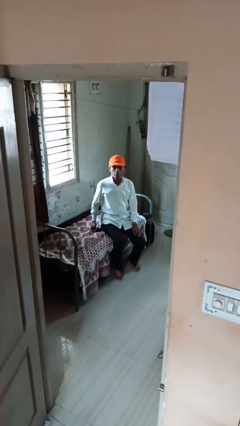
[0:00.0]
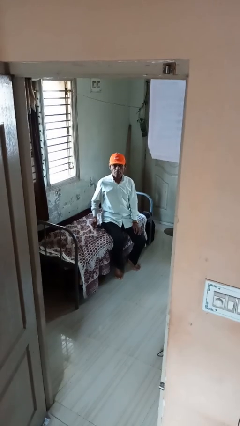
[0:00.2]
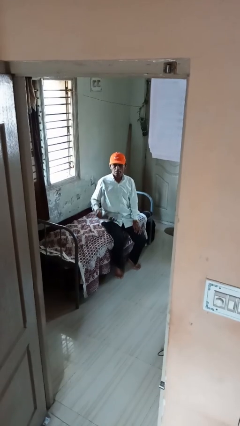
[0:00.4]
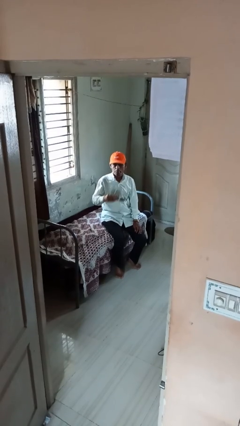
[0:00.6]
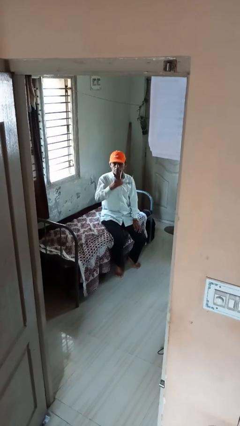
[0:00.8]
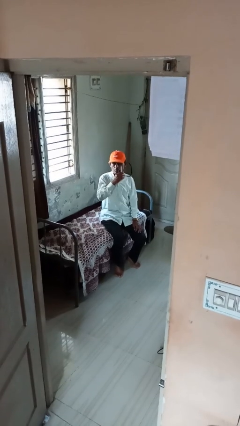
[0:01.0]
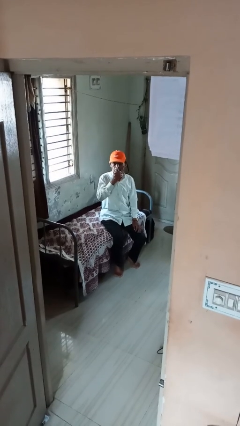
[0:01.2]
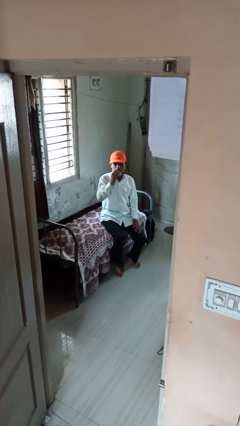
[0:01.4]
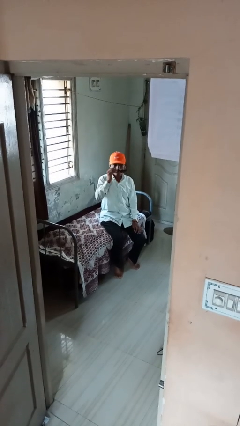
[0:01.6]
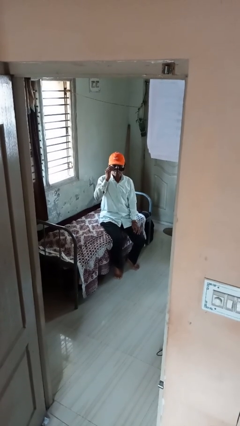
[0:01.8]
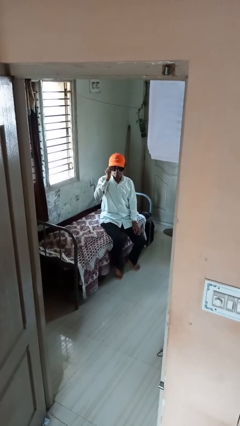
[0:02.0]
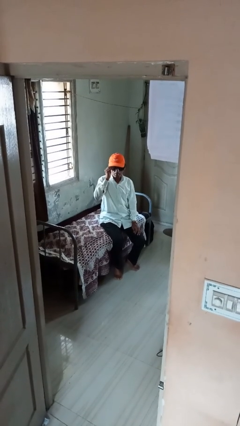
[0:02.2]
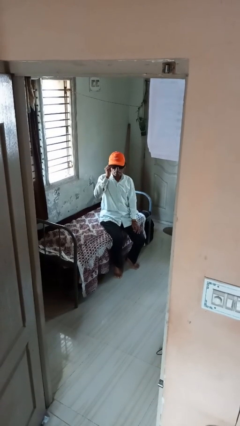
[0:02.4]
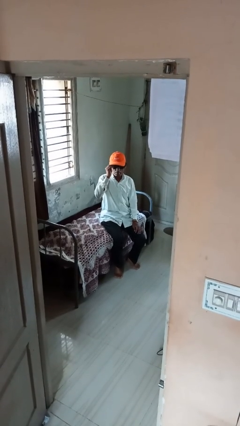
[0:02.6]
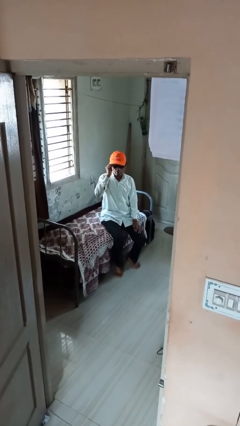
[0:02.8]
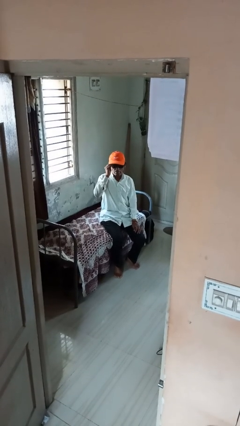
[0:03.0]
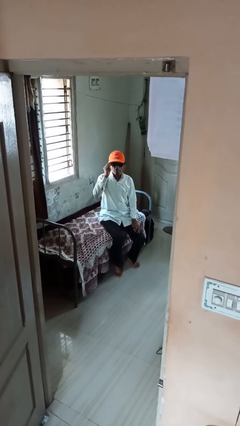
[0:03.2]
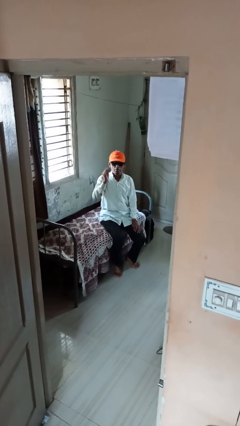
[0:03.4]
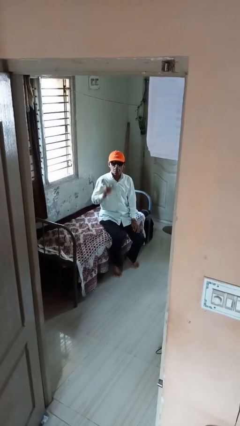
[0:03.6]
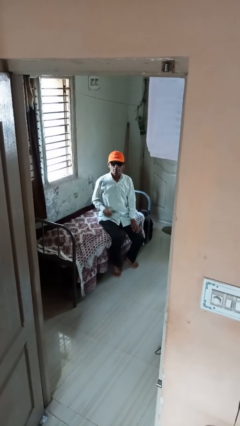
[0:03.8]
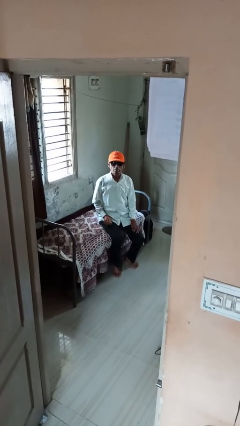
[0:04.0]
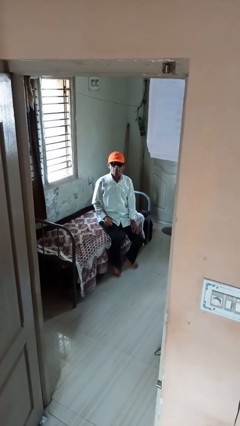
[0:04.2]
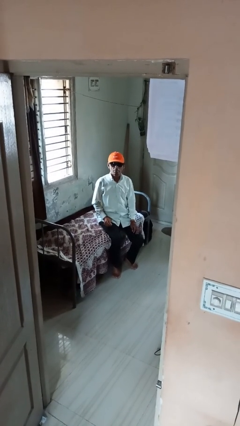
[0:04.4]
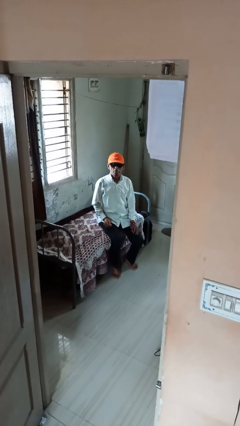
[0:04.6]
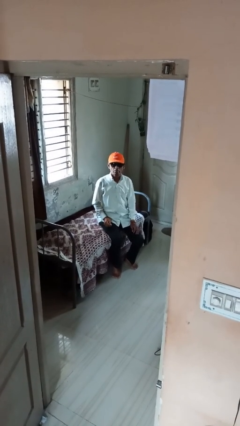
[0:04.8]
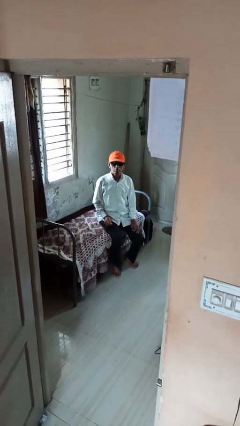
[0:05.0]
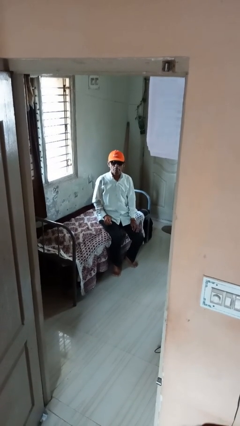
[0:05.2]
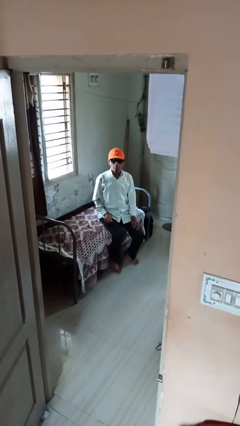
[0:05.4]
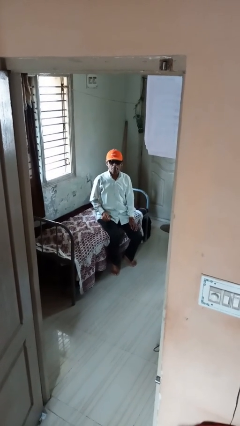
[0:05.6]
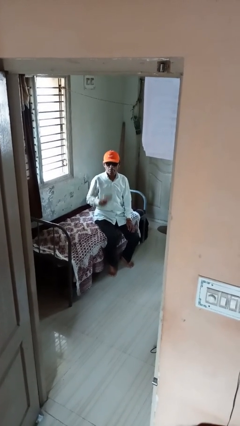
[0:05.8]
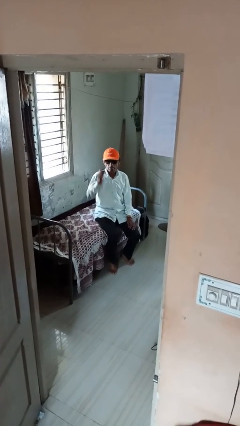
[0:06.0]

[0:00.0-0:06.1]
person puts on sunglasses

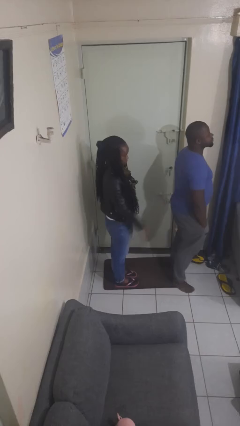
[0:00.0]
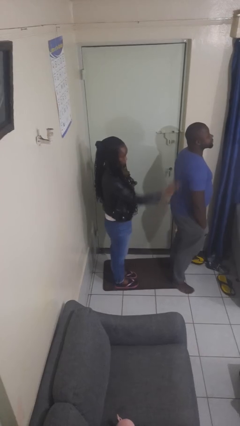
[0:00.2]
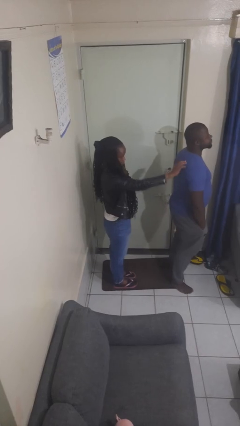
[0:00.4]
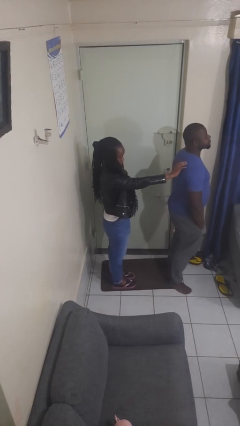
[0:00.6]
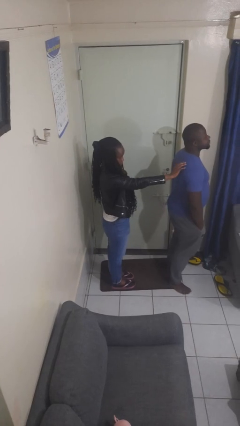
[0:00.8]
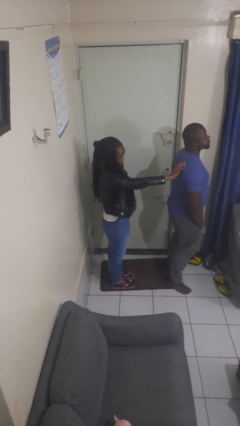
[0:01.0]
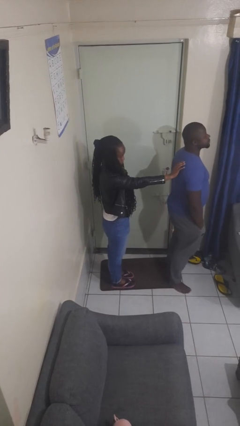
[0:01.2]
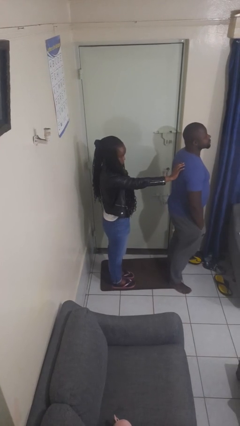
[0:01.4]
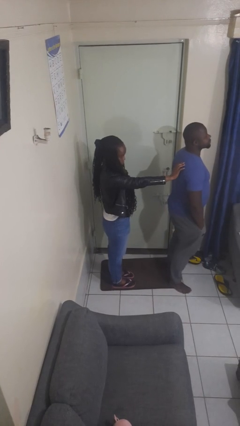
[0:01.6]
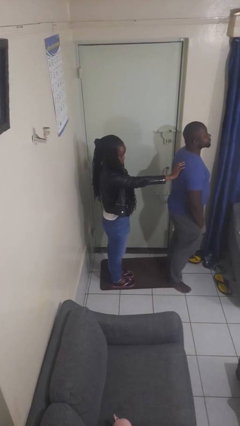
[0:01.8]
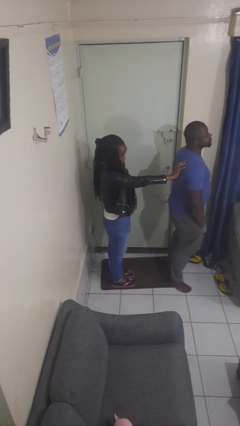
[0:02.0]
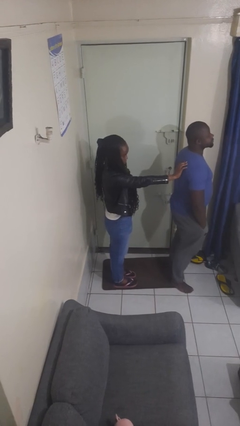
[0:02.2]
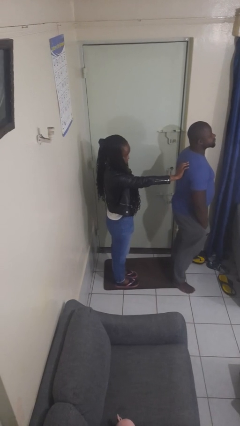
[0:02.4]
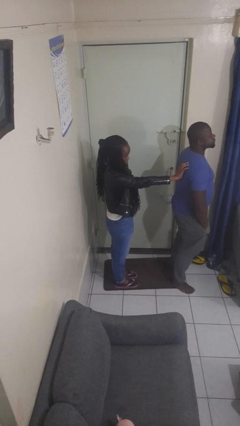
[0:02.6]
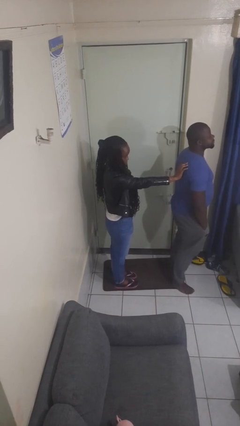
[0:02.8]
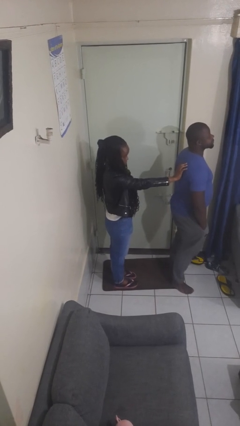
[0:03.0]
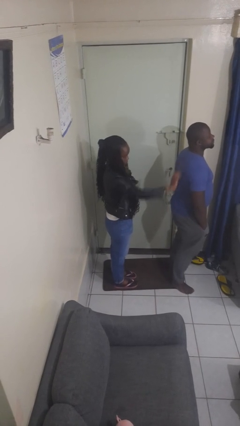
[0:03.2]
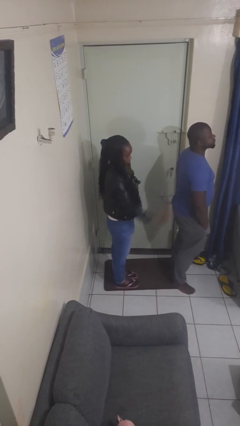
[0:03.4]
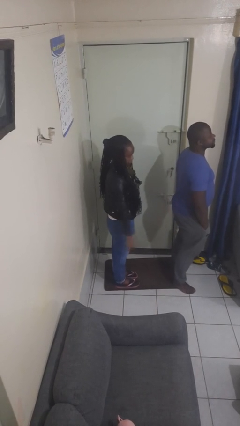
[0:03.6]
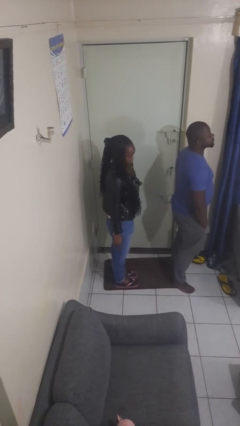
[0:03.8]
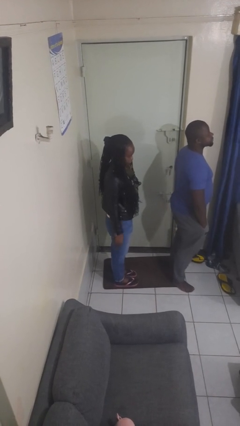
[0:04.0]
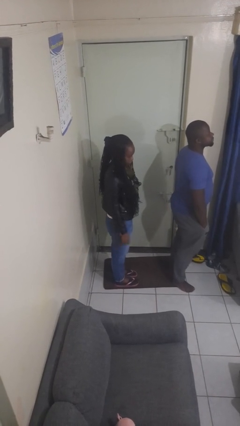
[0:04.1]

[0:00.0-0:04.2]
person touches back of person

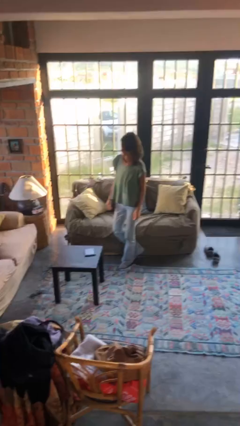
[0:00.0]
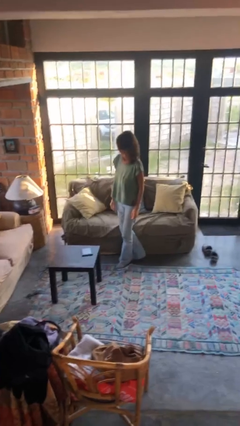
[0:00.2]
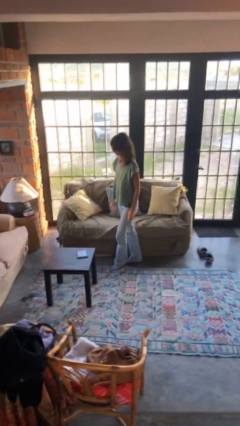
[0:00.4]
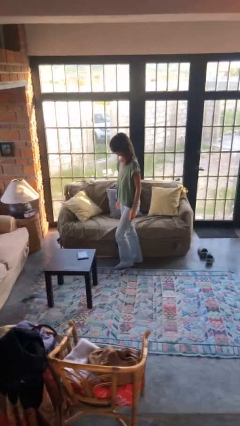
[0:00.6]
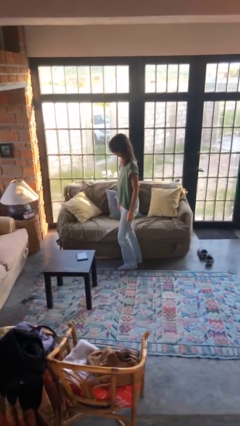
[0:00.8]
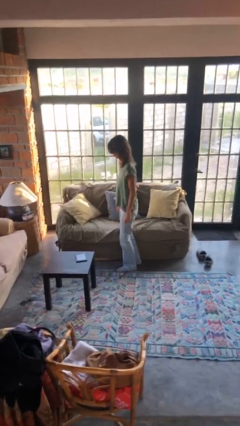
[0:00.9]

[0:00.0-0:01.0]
person stands up

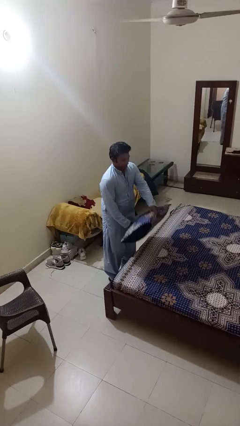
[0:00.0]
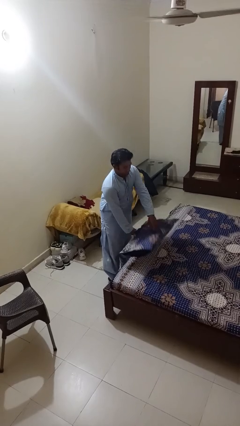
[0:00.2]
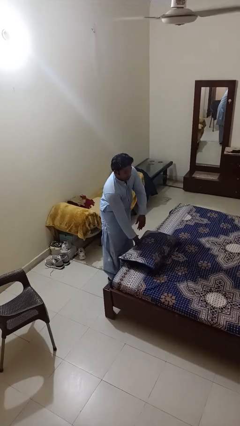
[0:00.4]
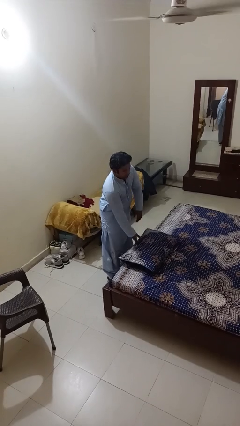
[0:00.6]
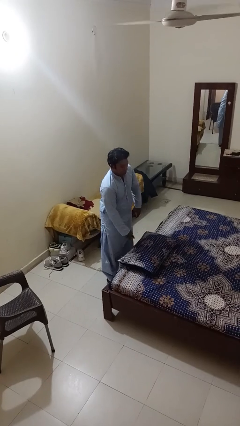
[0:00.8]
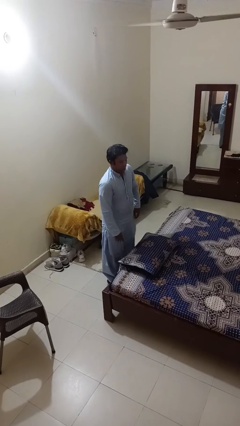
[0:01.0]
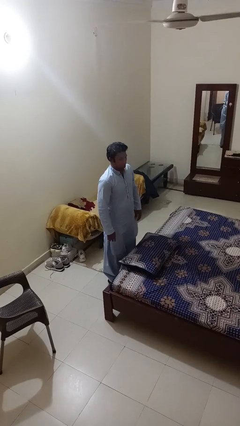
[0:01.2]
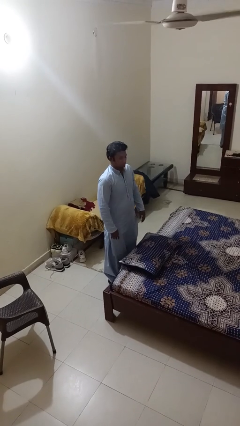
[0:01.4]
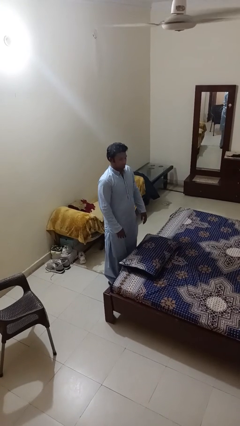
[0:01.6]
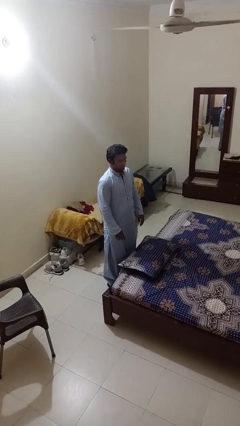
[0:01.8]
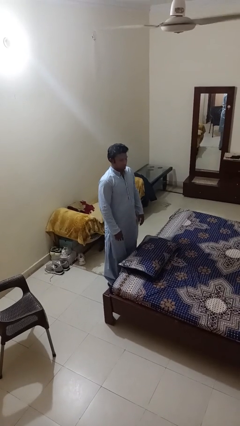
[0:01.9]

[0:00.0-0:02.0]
person puts down object on bed

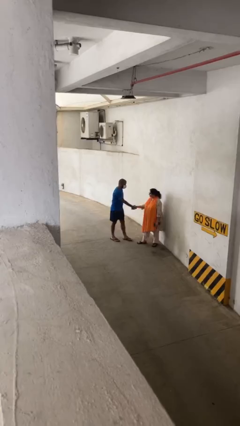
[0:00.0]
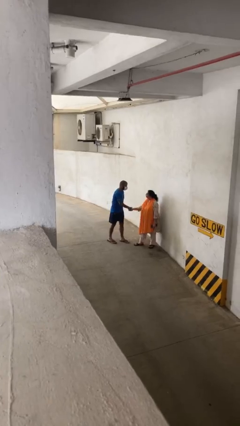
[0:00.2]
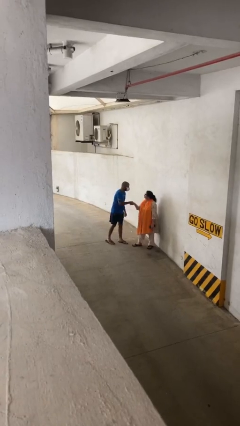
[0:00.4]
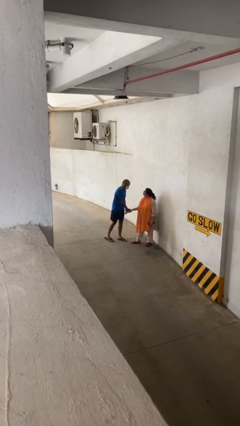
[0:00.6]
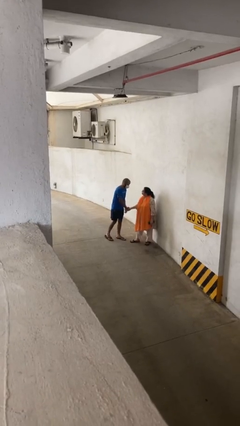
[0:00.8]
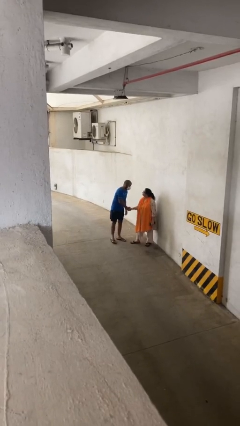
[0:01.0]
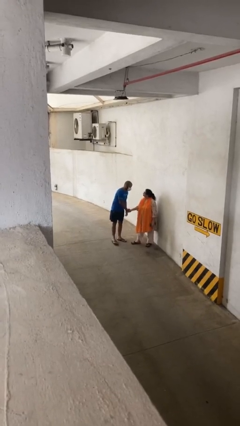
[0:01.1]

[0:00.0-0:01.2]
person shakes hand

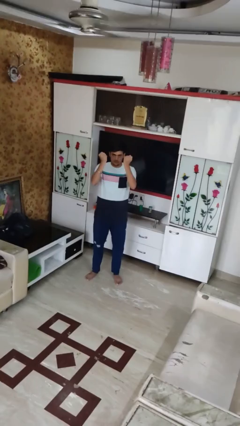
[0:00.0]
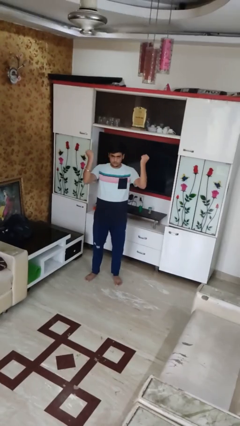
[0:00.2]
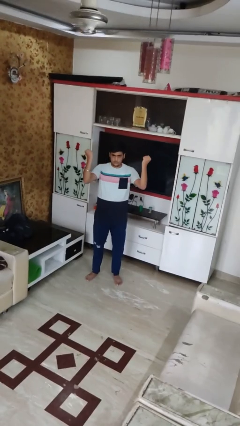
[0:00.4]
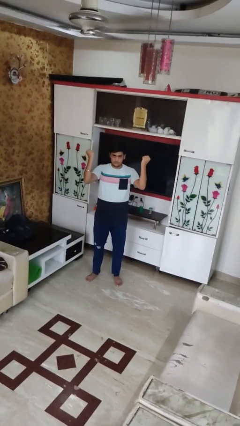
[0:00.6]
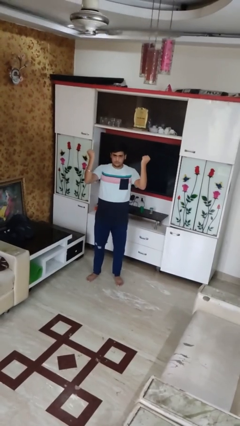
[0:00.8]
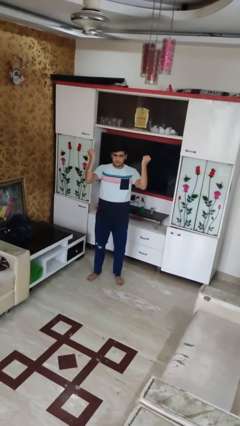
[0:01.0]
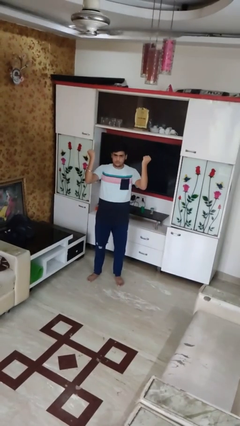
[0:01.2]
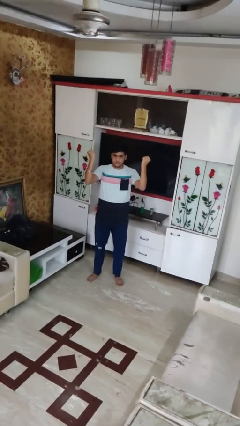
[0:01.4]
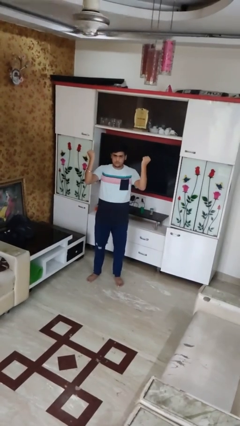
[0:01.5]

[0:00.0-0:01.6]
person gestures zoom in

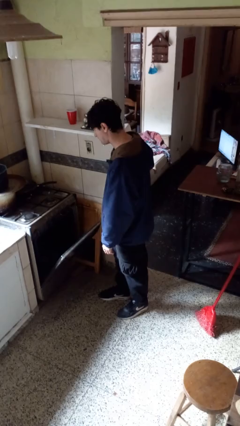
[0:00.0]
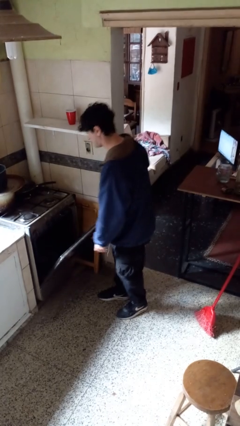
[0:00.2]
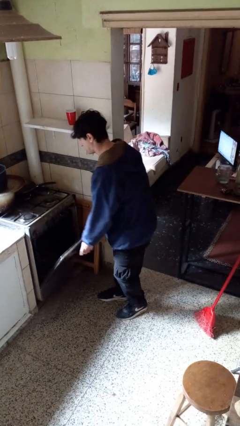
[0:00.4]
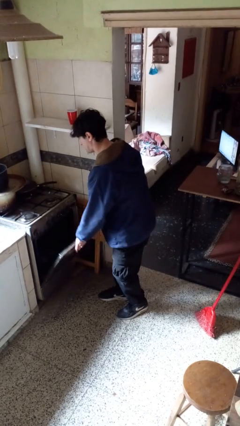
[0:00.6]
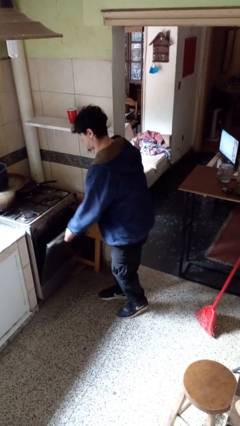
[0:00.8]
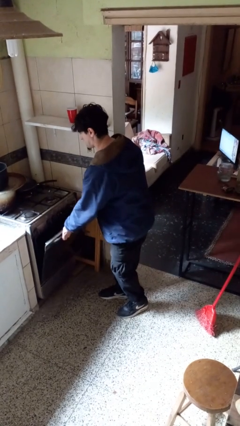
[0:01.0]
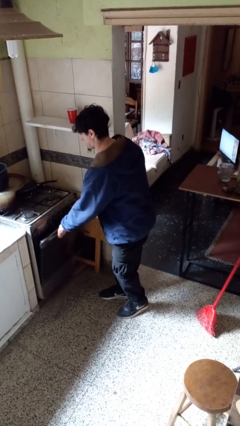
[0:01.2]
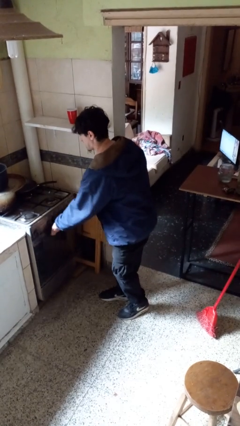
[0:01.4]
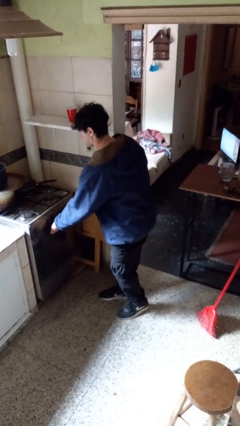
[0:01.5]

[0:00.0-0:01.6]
person closes oven door
